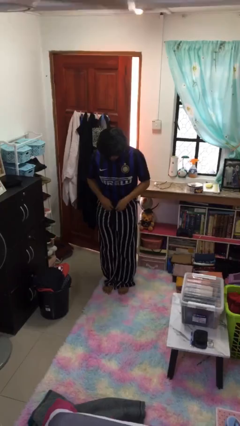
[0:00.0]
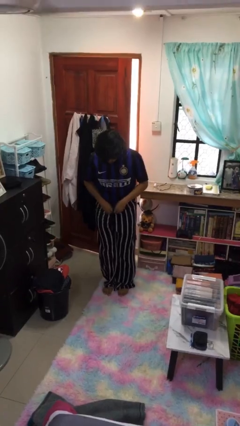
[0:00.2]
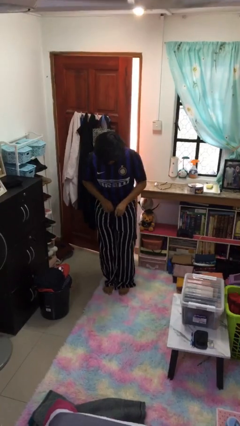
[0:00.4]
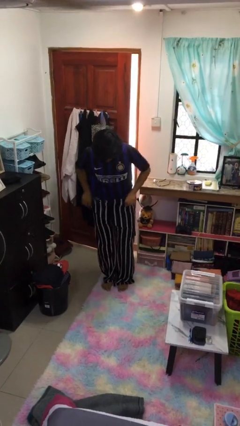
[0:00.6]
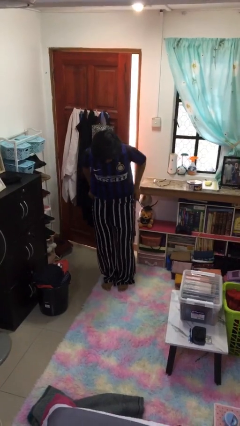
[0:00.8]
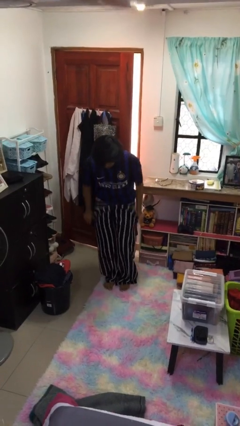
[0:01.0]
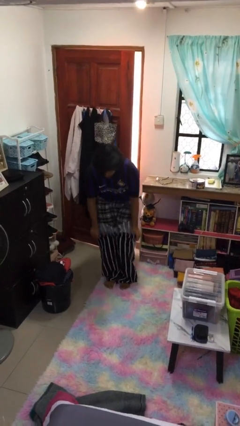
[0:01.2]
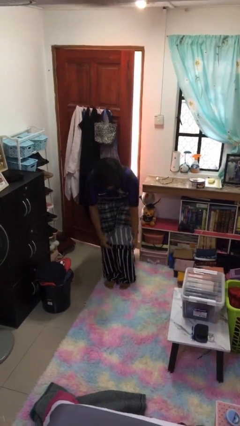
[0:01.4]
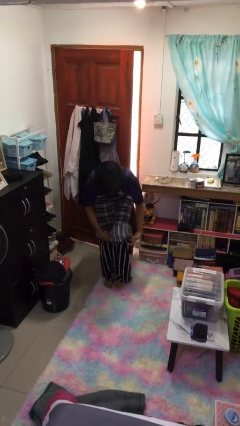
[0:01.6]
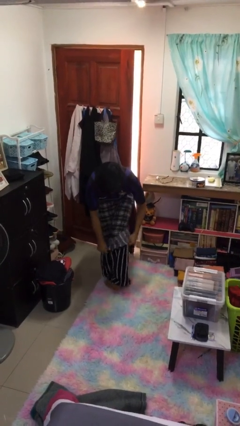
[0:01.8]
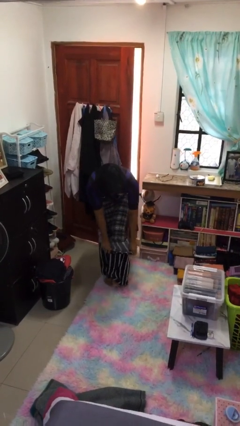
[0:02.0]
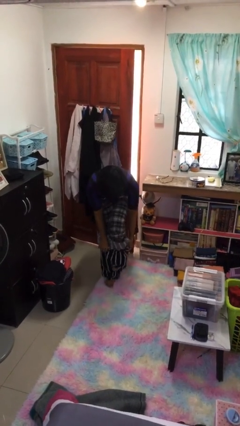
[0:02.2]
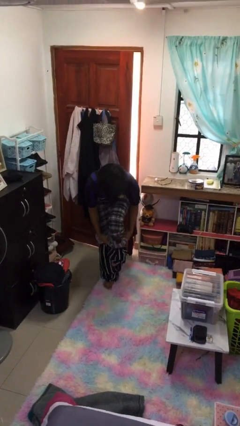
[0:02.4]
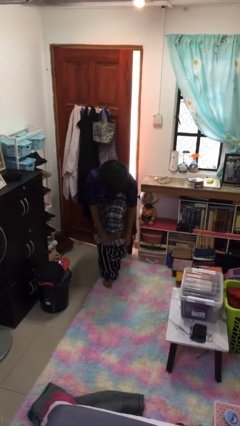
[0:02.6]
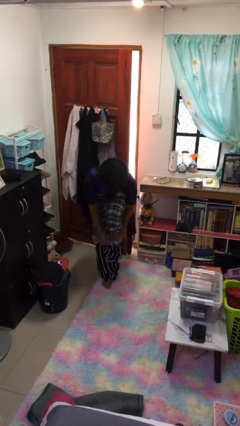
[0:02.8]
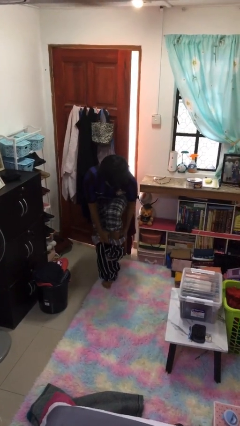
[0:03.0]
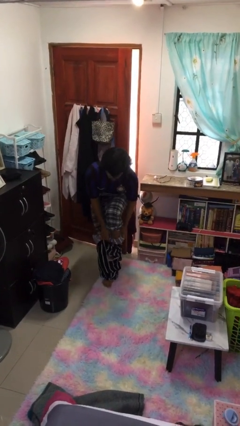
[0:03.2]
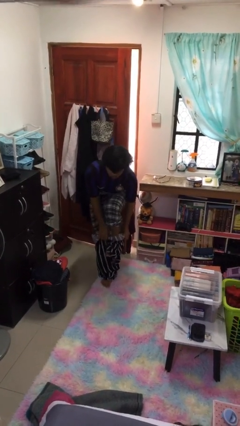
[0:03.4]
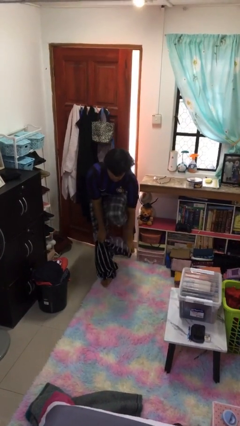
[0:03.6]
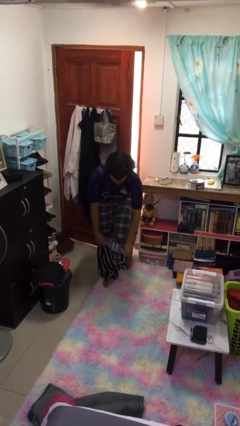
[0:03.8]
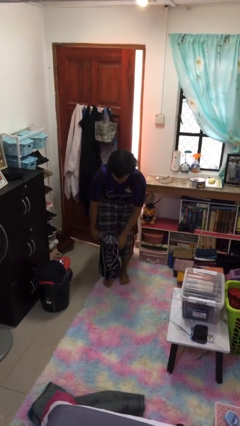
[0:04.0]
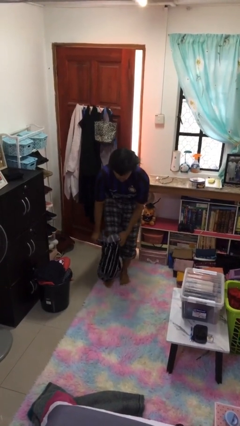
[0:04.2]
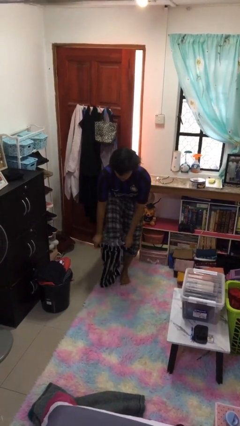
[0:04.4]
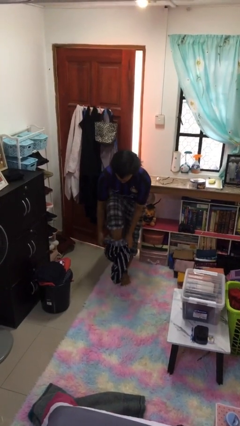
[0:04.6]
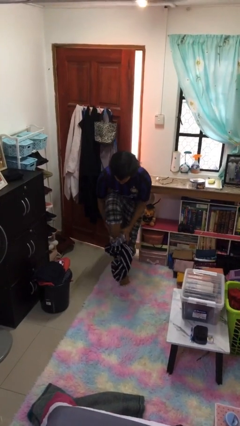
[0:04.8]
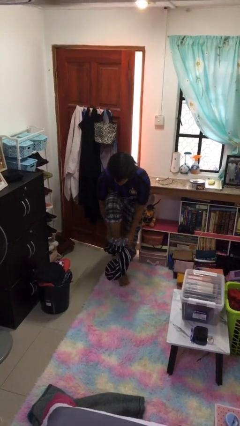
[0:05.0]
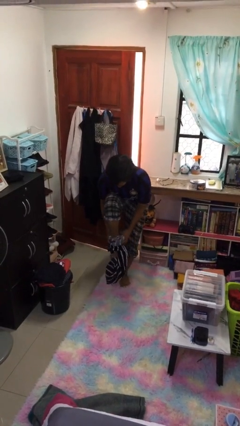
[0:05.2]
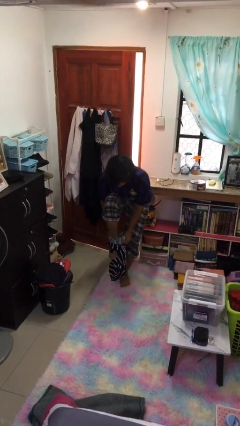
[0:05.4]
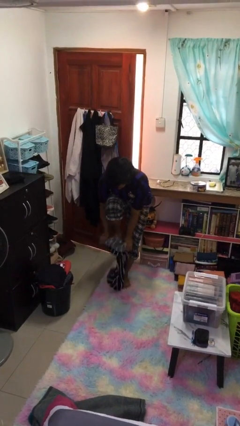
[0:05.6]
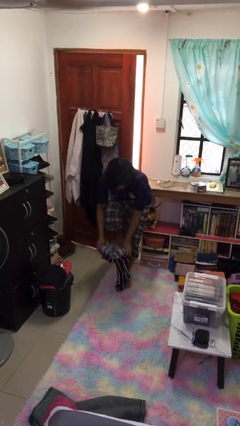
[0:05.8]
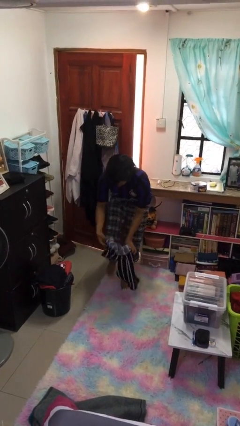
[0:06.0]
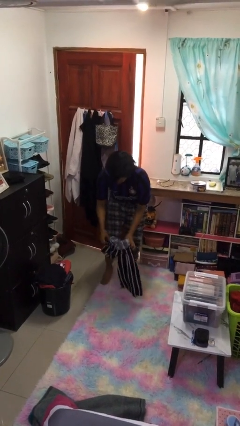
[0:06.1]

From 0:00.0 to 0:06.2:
person takes off pants

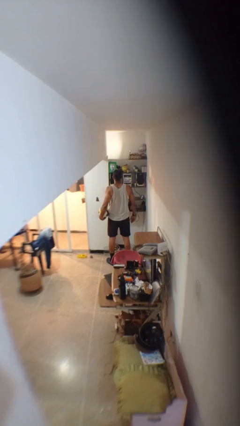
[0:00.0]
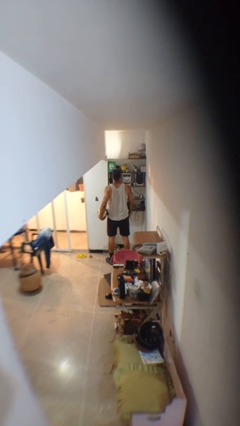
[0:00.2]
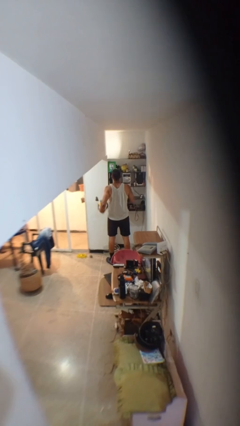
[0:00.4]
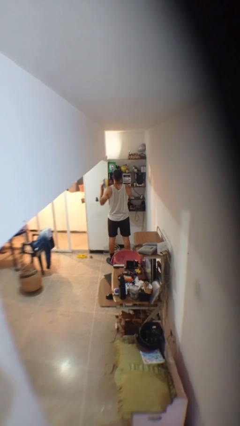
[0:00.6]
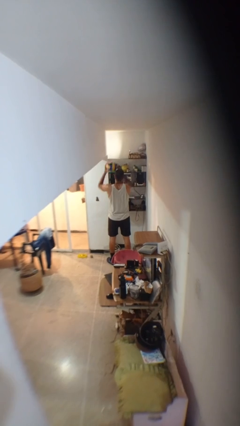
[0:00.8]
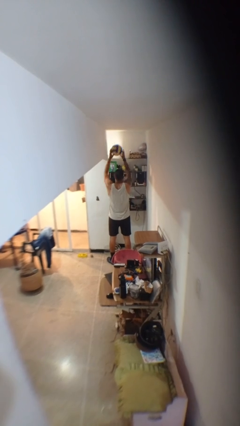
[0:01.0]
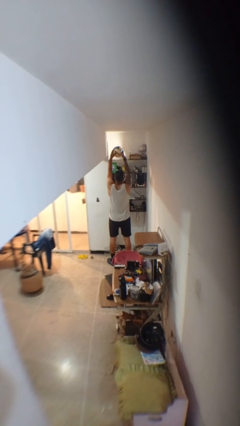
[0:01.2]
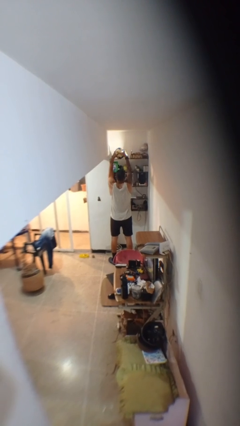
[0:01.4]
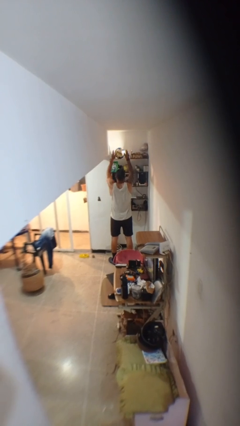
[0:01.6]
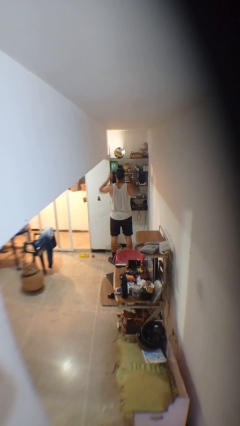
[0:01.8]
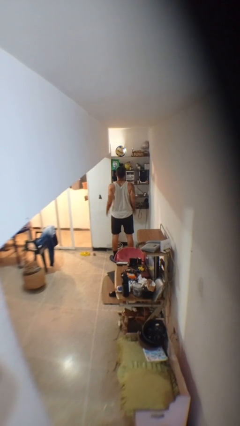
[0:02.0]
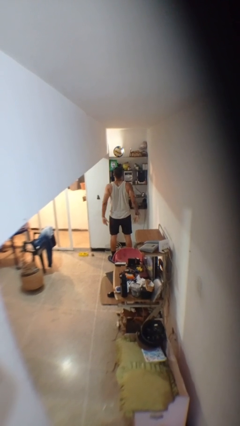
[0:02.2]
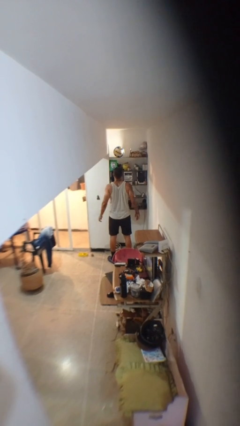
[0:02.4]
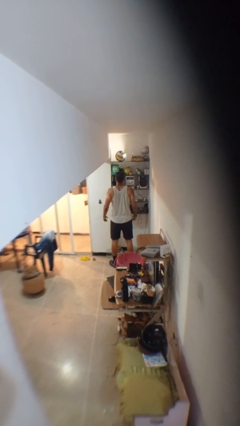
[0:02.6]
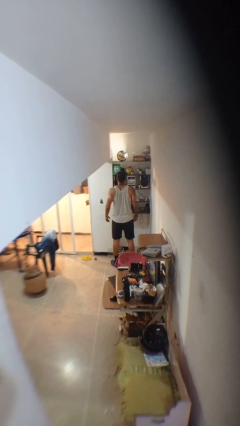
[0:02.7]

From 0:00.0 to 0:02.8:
person puts down object on shelf

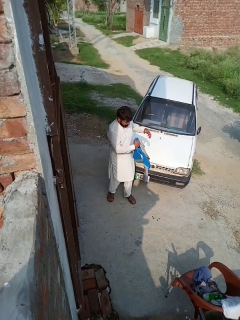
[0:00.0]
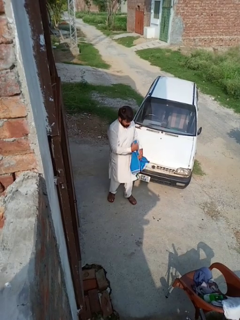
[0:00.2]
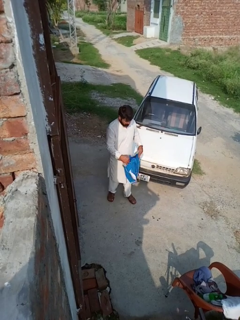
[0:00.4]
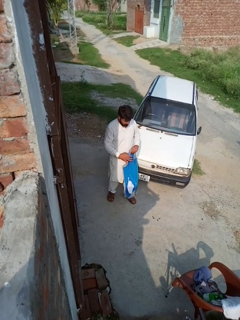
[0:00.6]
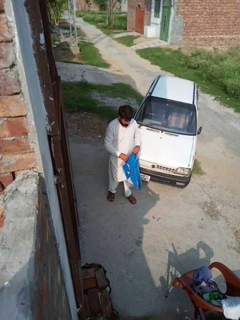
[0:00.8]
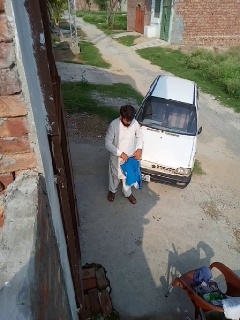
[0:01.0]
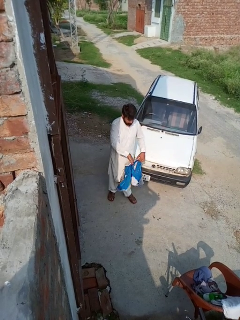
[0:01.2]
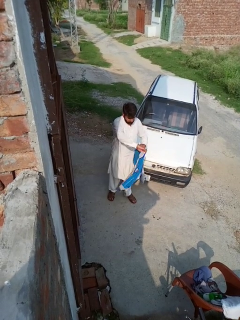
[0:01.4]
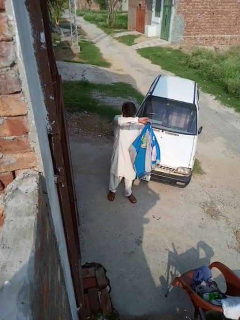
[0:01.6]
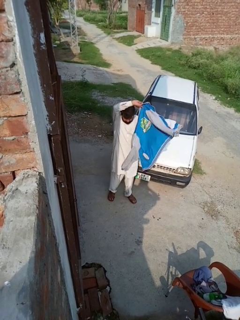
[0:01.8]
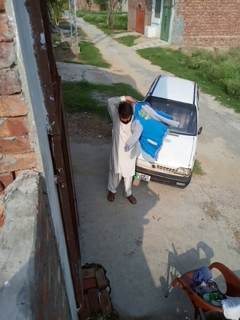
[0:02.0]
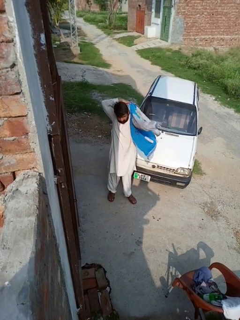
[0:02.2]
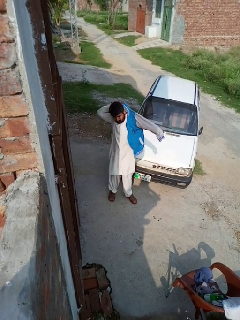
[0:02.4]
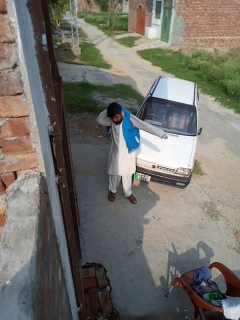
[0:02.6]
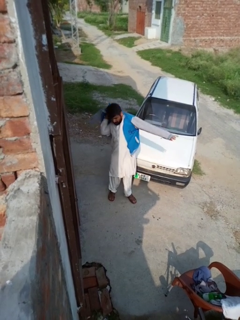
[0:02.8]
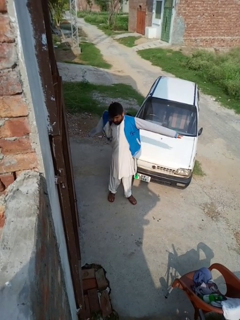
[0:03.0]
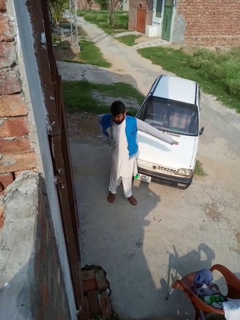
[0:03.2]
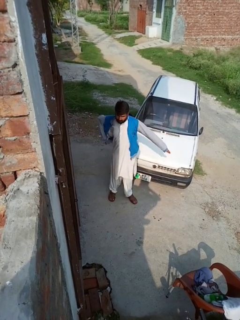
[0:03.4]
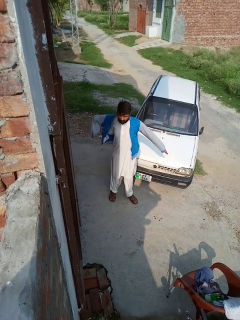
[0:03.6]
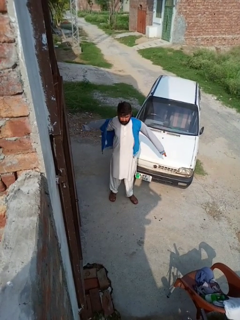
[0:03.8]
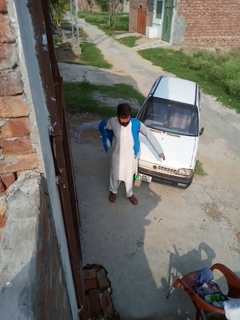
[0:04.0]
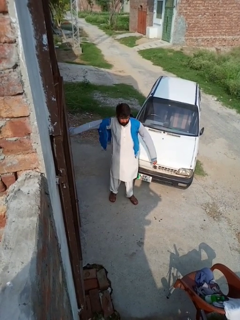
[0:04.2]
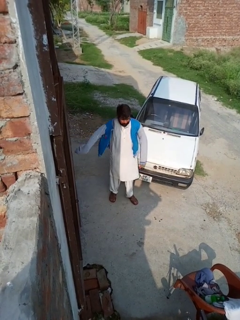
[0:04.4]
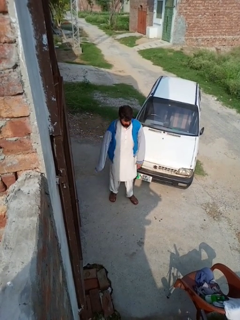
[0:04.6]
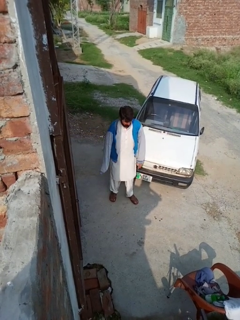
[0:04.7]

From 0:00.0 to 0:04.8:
person puts on jacket

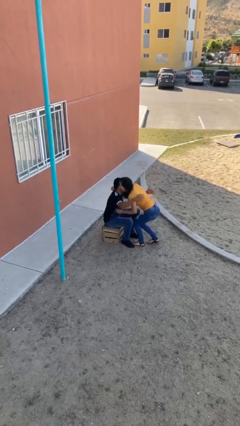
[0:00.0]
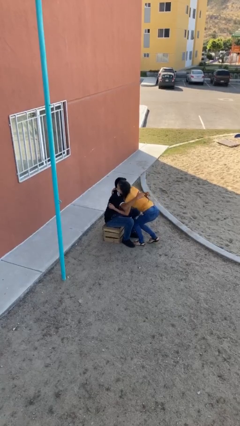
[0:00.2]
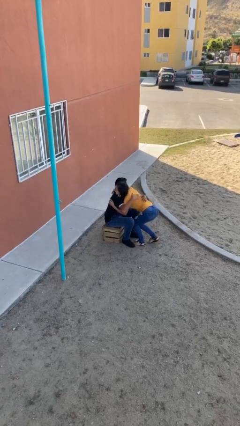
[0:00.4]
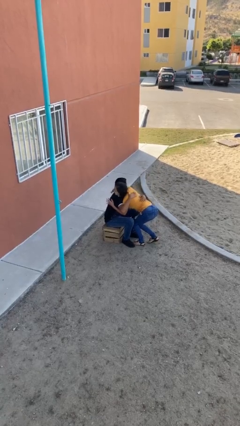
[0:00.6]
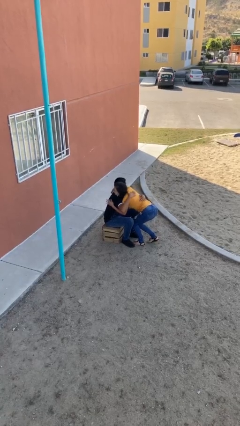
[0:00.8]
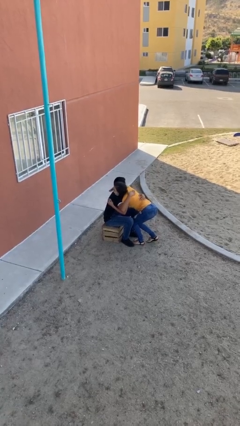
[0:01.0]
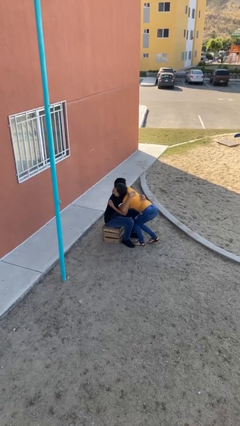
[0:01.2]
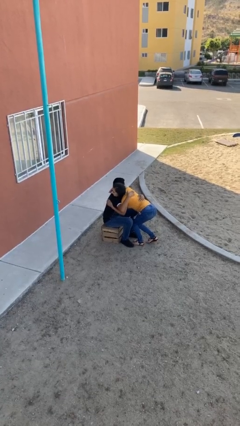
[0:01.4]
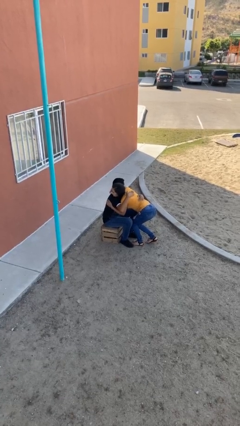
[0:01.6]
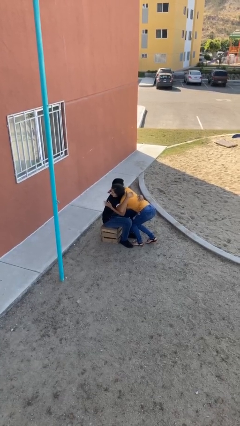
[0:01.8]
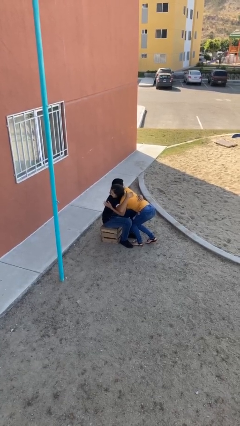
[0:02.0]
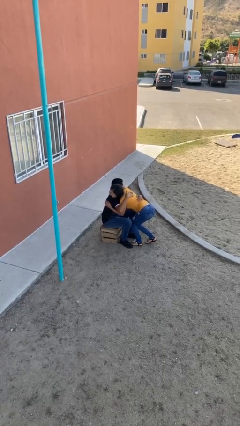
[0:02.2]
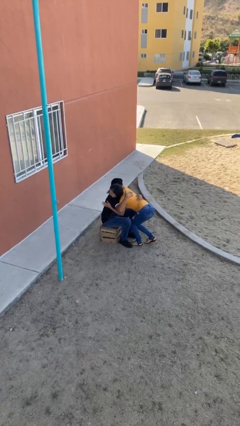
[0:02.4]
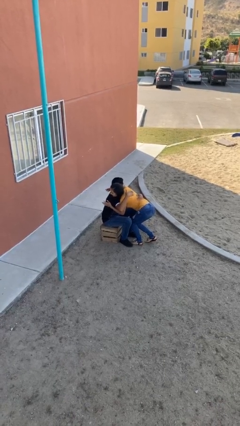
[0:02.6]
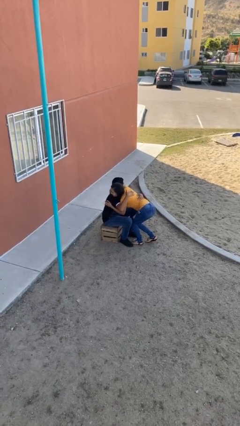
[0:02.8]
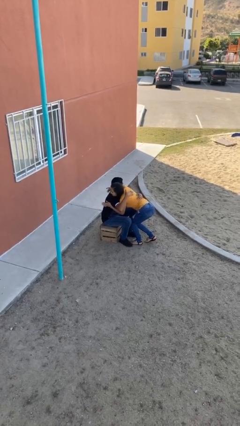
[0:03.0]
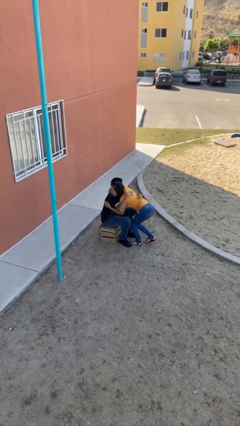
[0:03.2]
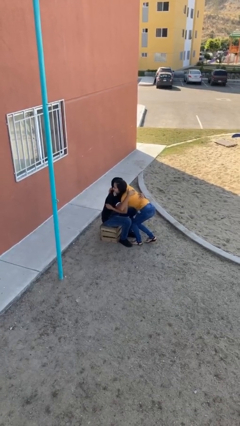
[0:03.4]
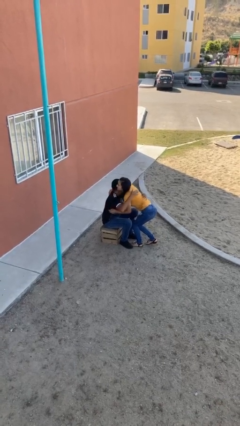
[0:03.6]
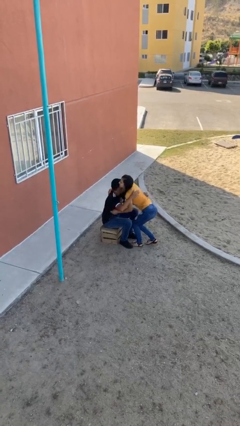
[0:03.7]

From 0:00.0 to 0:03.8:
person embraces person
